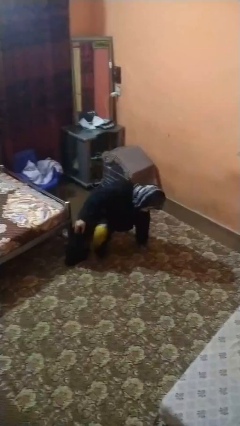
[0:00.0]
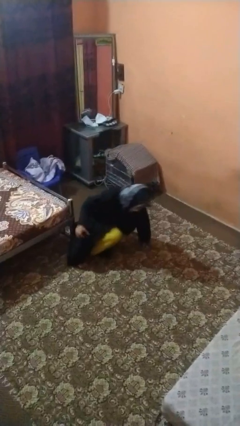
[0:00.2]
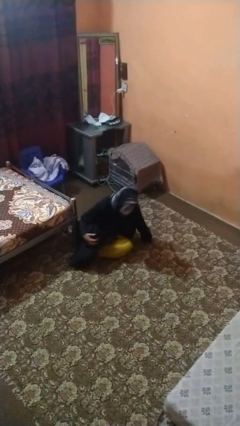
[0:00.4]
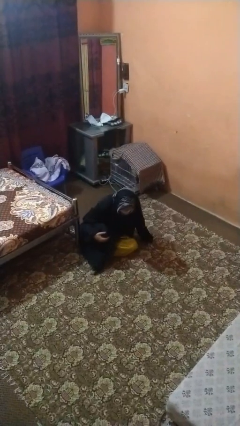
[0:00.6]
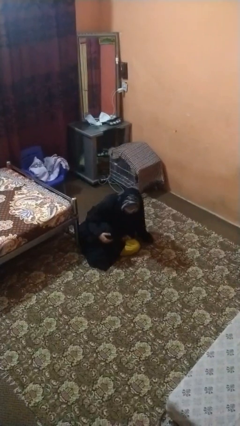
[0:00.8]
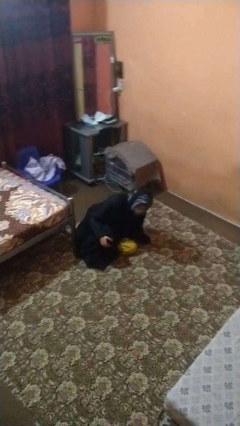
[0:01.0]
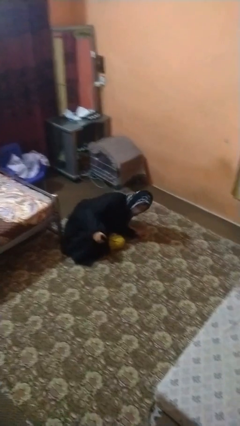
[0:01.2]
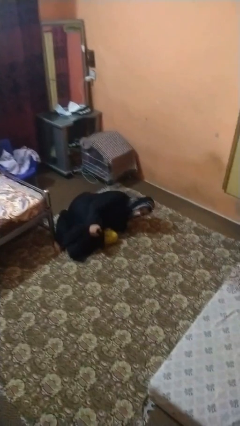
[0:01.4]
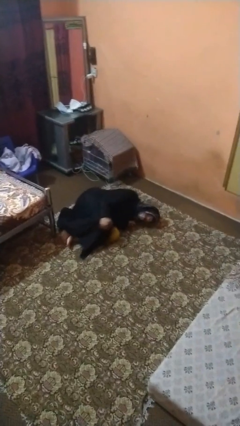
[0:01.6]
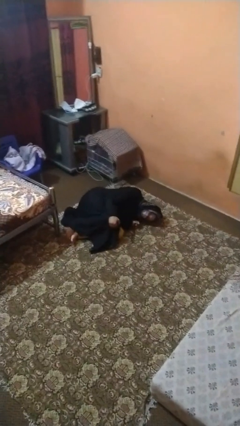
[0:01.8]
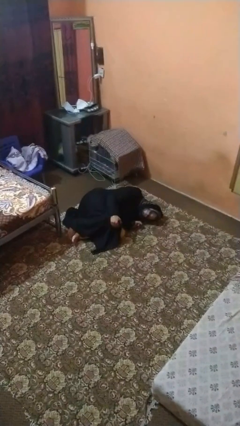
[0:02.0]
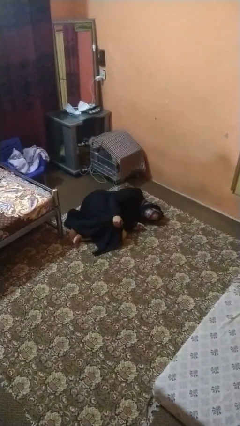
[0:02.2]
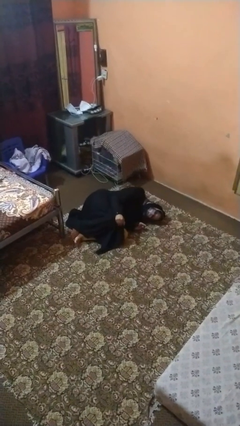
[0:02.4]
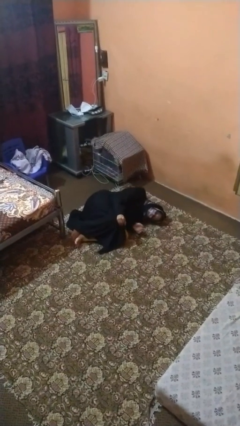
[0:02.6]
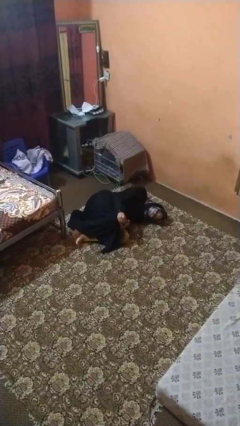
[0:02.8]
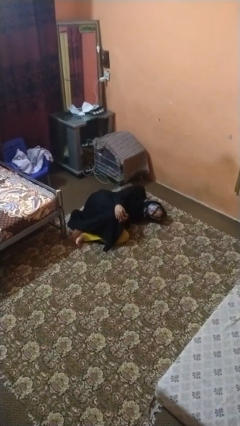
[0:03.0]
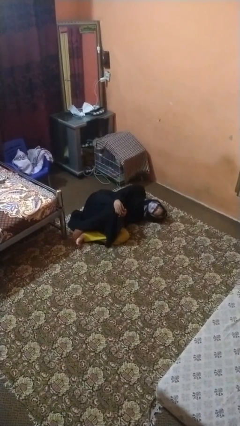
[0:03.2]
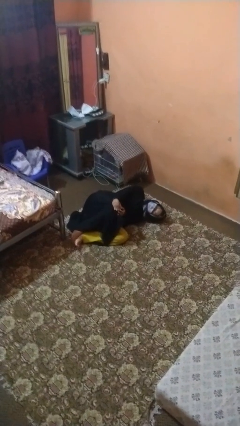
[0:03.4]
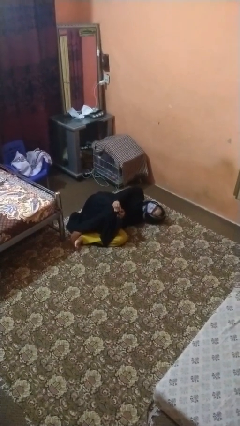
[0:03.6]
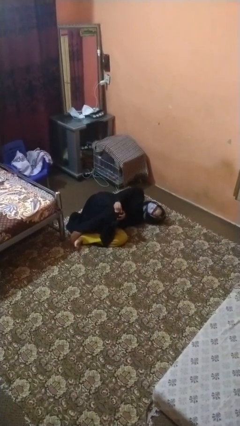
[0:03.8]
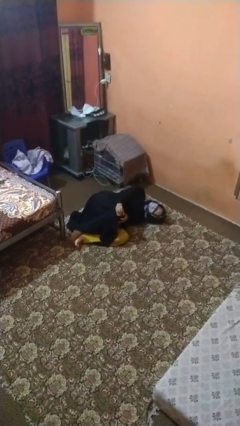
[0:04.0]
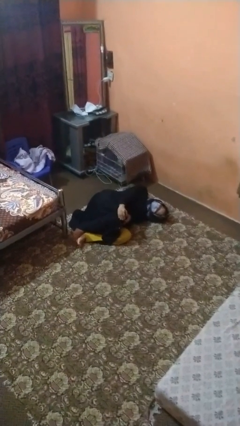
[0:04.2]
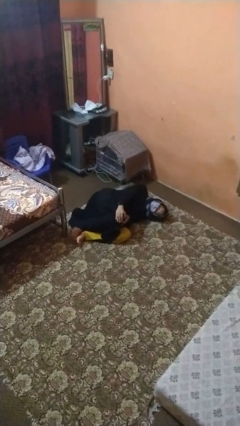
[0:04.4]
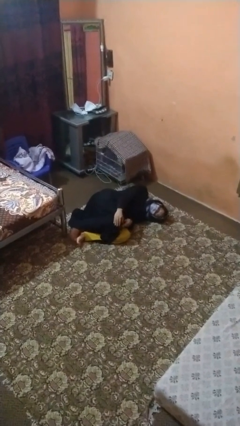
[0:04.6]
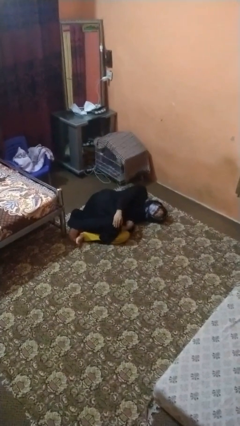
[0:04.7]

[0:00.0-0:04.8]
person lies down on floor

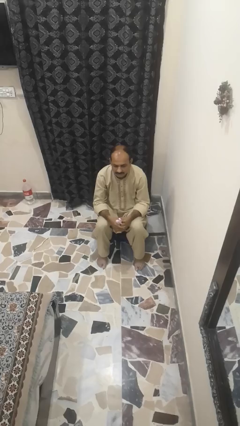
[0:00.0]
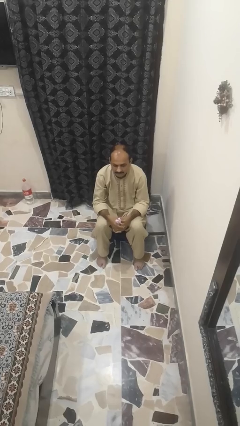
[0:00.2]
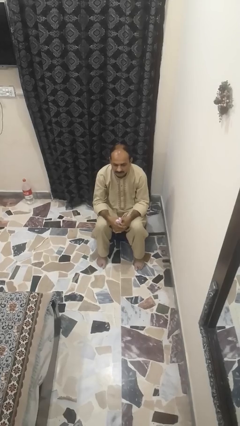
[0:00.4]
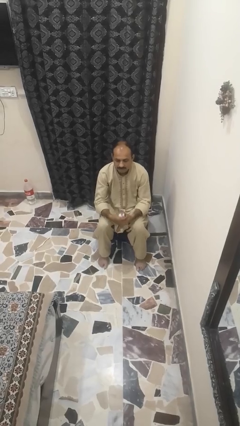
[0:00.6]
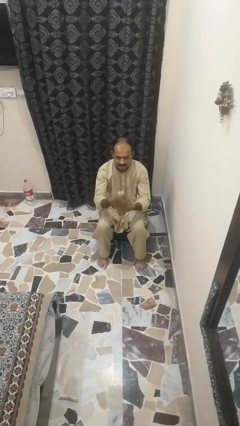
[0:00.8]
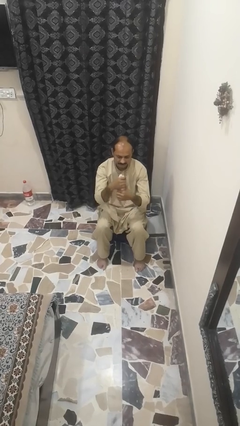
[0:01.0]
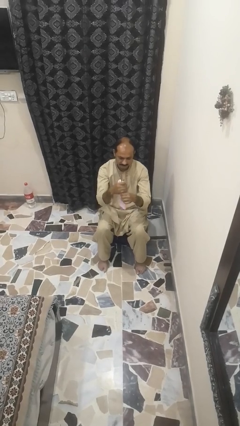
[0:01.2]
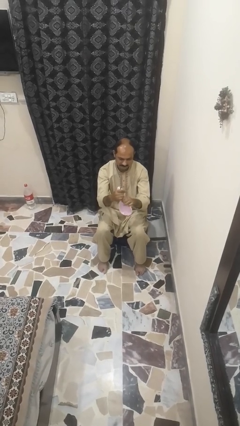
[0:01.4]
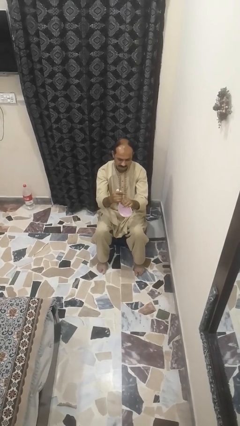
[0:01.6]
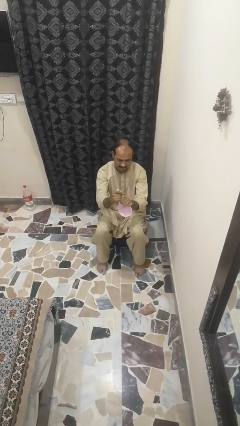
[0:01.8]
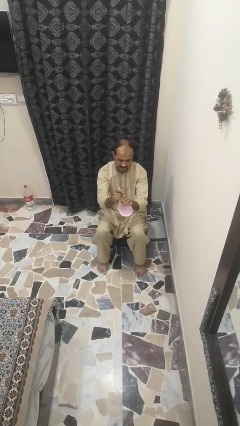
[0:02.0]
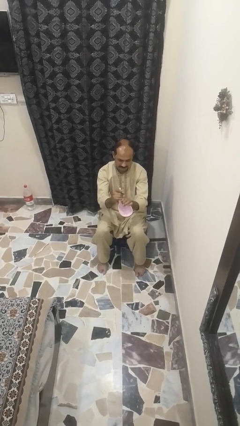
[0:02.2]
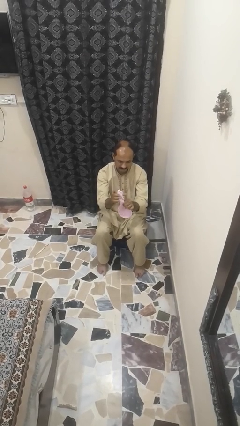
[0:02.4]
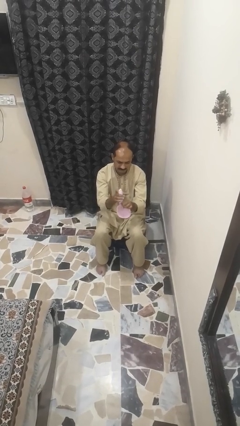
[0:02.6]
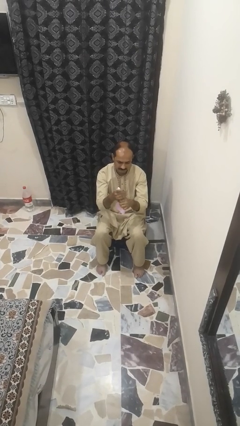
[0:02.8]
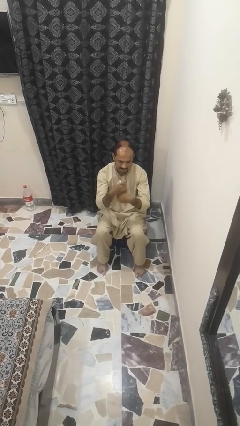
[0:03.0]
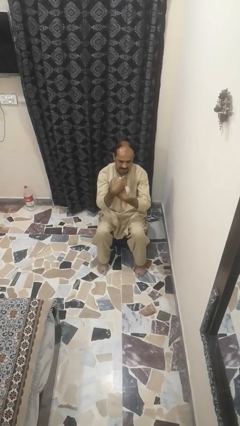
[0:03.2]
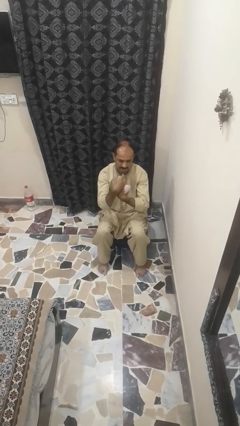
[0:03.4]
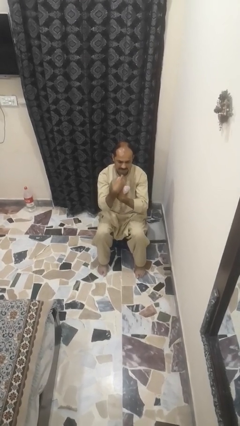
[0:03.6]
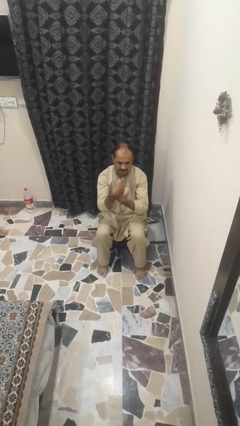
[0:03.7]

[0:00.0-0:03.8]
person squeezes object

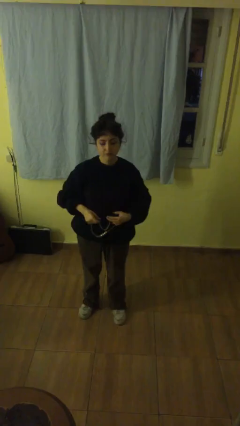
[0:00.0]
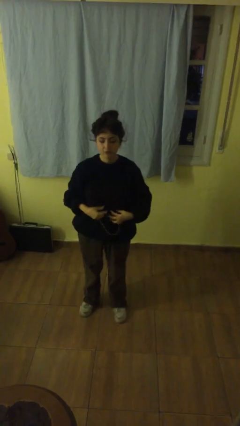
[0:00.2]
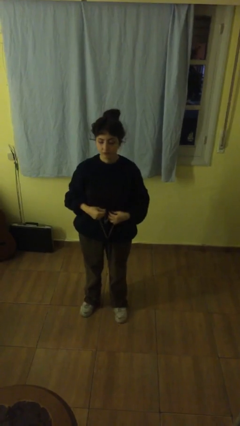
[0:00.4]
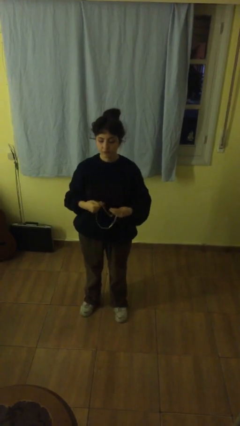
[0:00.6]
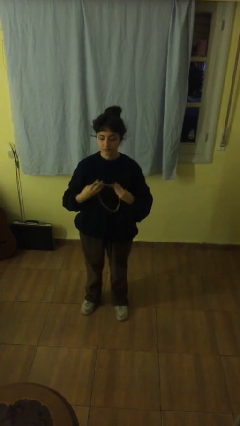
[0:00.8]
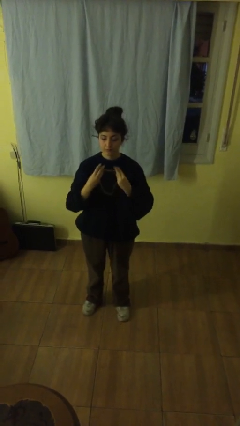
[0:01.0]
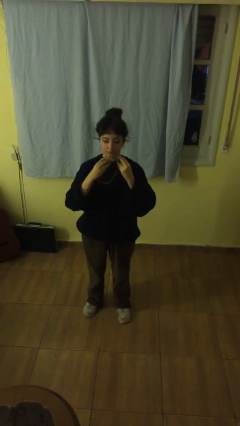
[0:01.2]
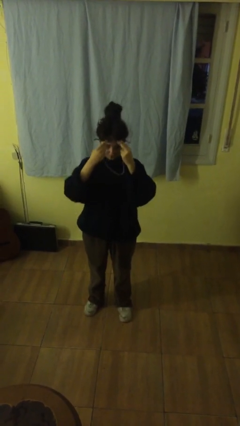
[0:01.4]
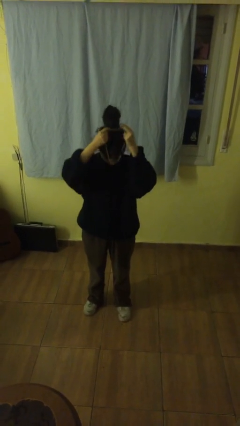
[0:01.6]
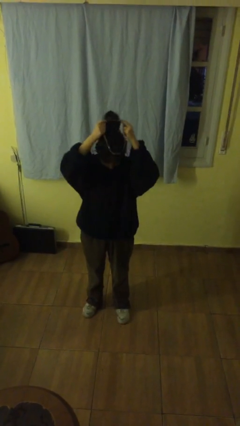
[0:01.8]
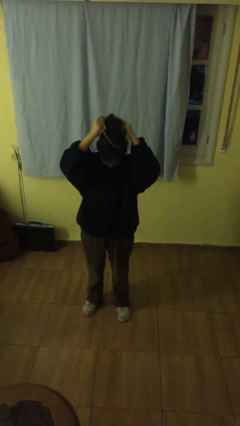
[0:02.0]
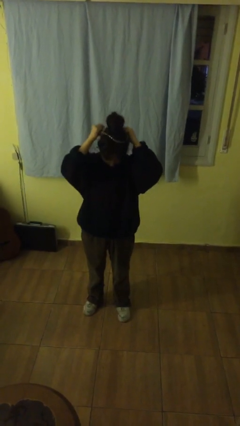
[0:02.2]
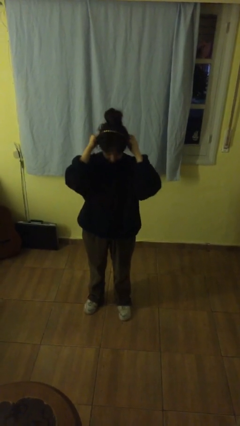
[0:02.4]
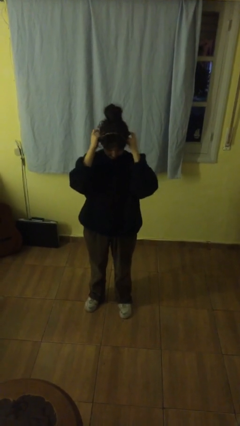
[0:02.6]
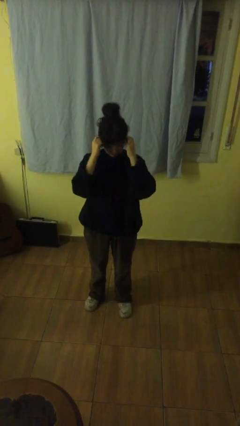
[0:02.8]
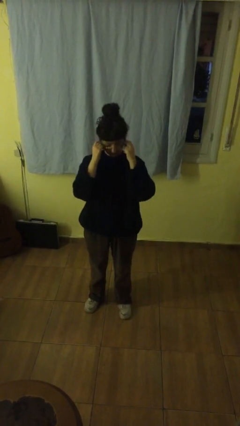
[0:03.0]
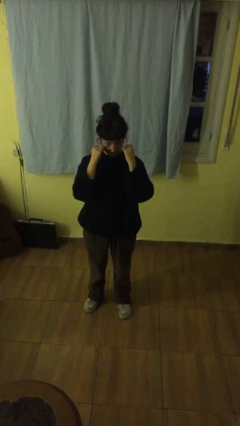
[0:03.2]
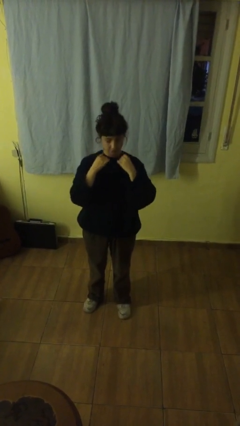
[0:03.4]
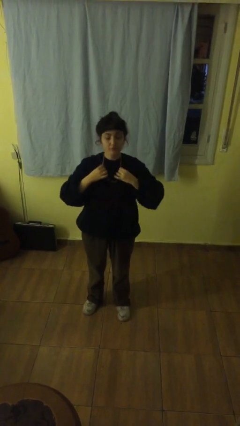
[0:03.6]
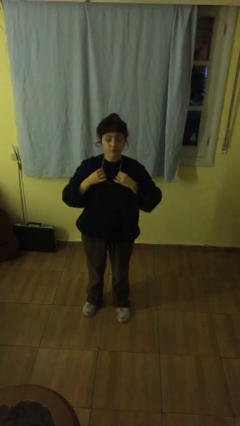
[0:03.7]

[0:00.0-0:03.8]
person puts on necklace

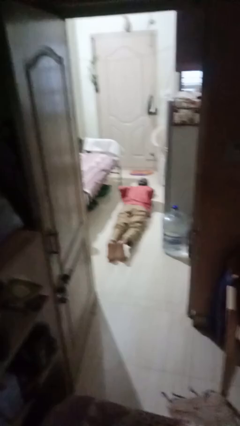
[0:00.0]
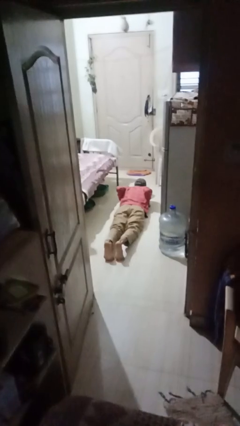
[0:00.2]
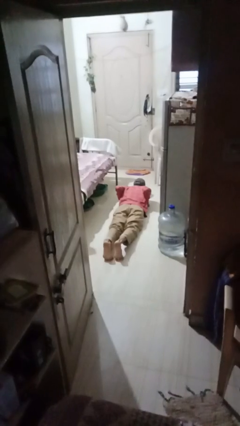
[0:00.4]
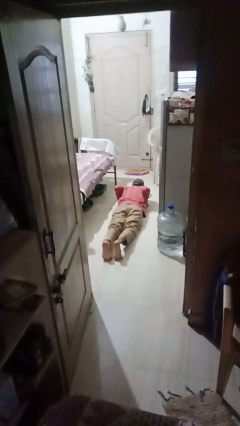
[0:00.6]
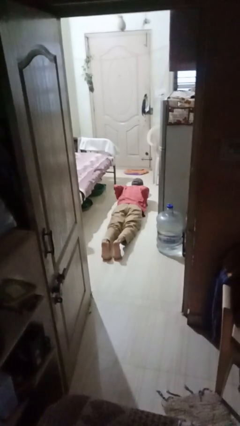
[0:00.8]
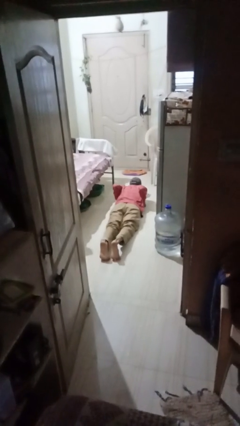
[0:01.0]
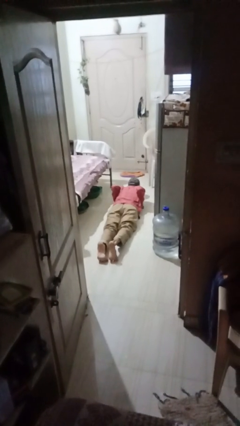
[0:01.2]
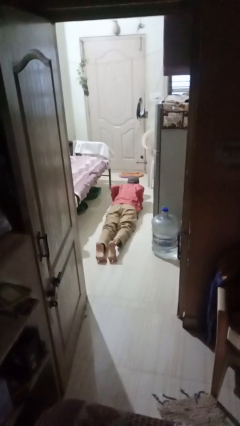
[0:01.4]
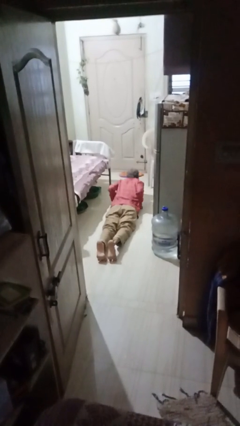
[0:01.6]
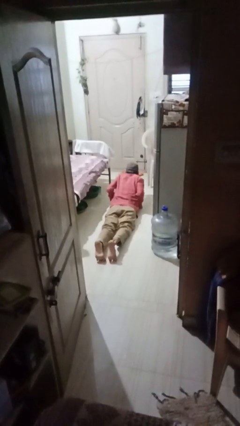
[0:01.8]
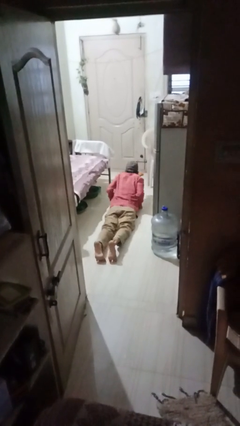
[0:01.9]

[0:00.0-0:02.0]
person exercises with pushup

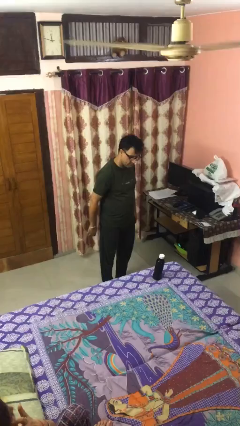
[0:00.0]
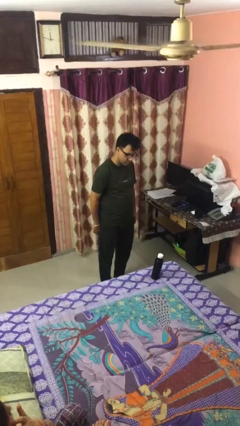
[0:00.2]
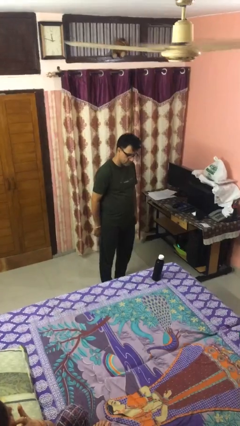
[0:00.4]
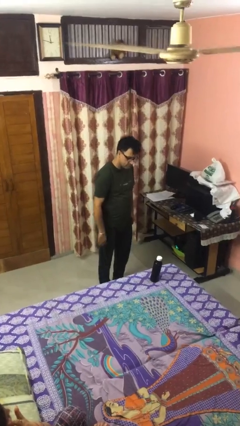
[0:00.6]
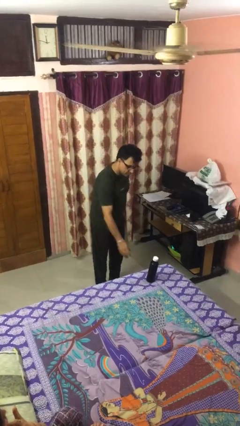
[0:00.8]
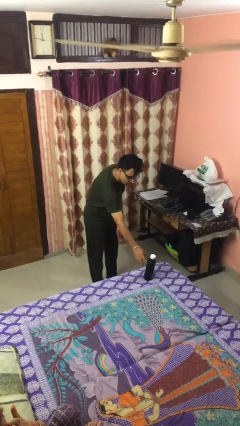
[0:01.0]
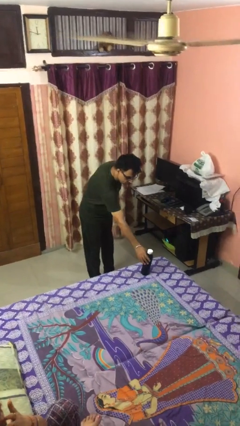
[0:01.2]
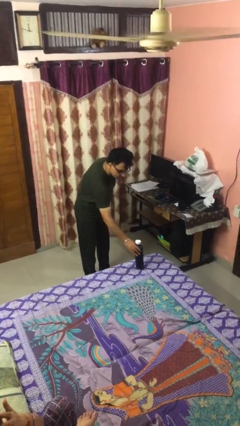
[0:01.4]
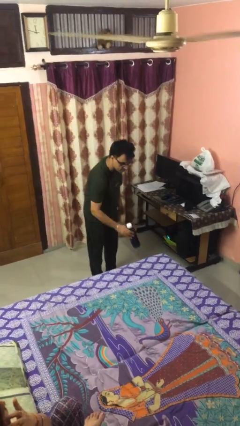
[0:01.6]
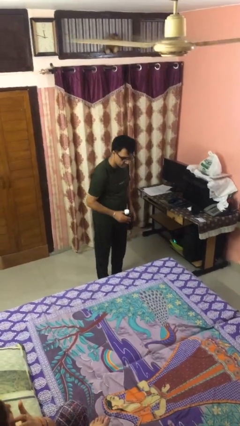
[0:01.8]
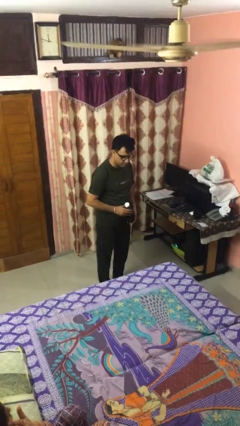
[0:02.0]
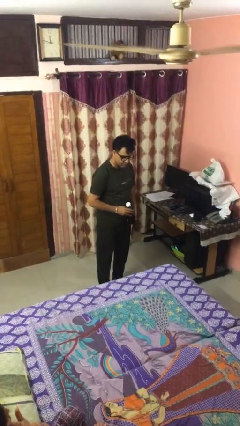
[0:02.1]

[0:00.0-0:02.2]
person picks up object from bed

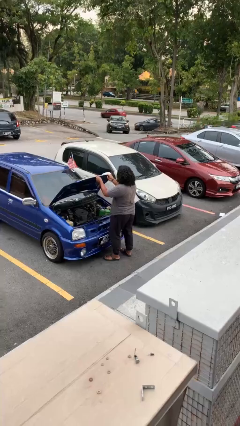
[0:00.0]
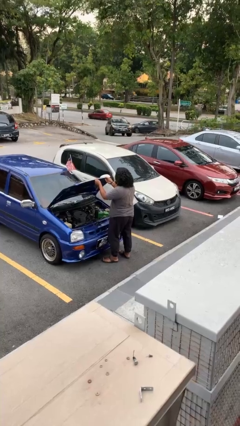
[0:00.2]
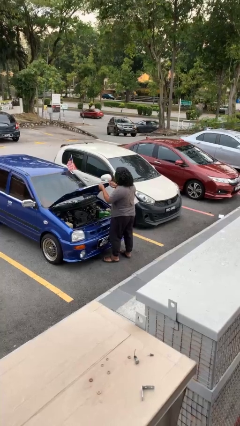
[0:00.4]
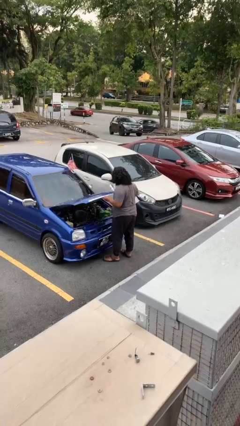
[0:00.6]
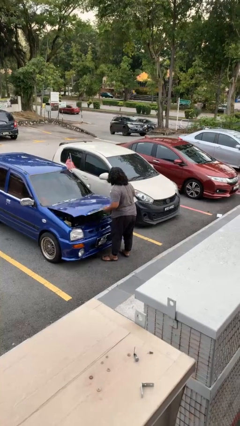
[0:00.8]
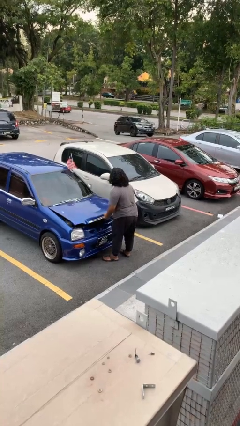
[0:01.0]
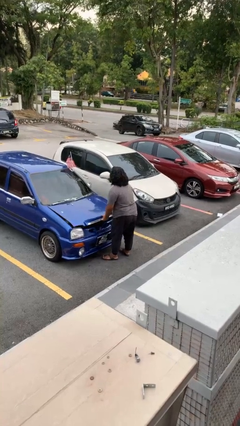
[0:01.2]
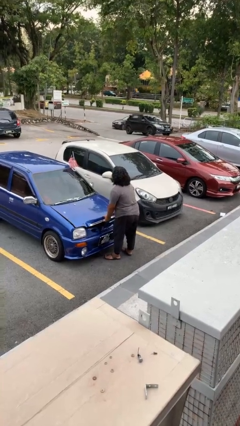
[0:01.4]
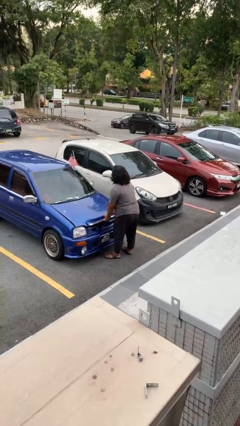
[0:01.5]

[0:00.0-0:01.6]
person closes car hood
